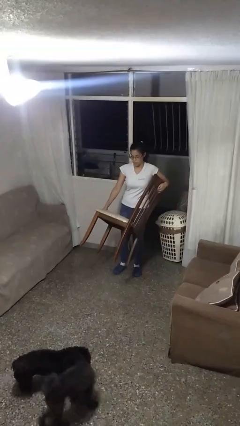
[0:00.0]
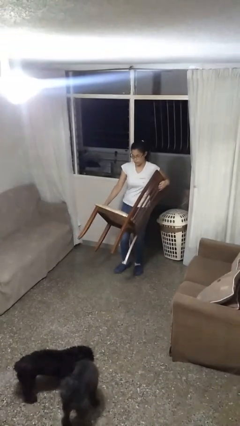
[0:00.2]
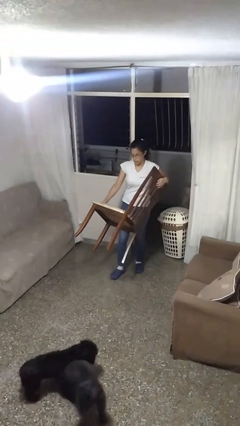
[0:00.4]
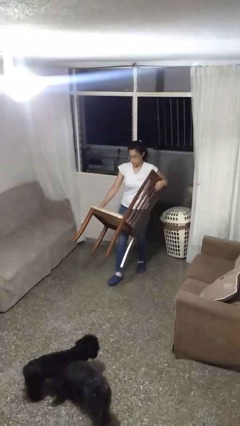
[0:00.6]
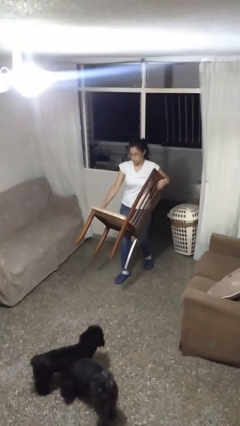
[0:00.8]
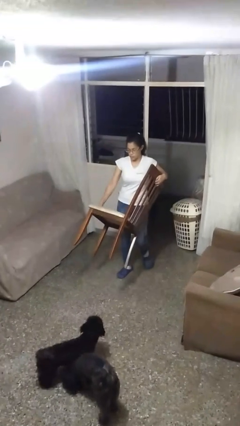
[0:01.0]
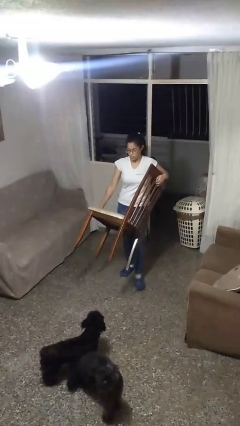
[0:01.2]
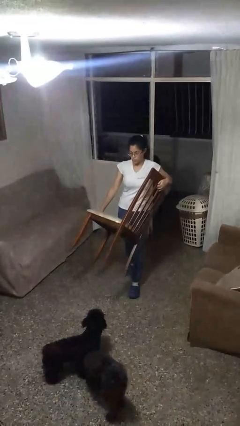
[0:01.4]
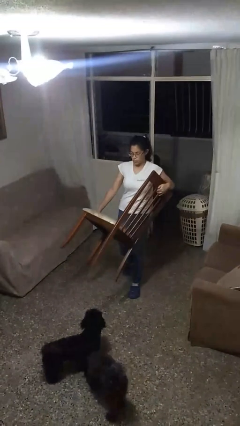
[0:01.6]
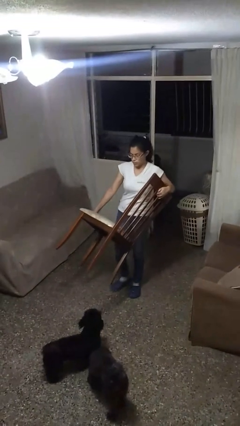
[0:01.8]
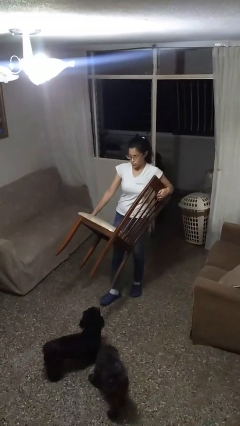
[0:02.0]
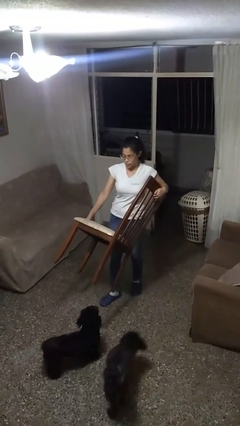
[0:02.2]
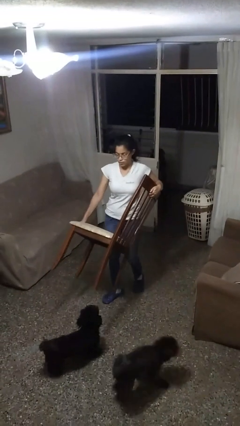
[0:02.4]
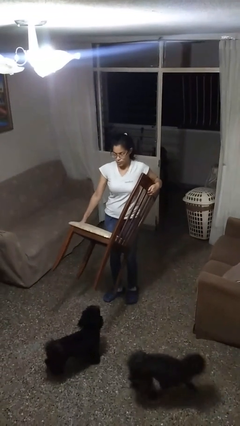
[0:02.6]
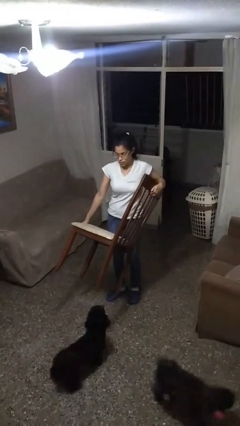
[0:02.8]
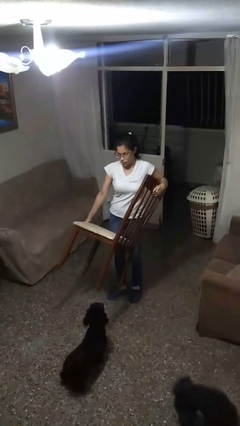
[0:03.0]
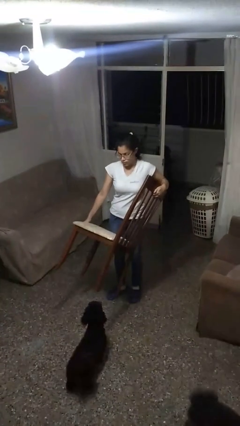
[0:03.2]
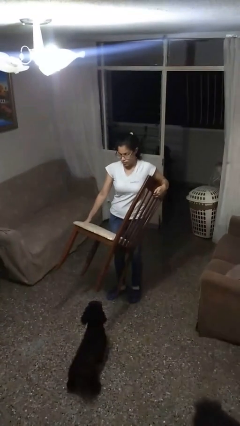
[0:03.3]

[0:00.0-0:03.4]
person carries furniture

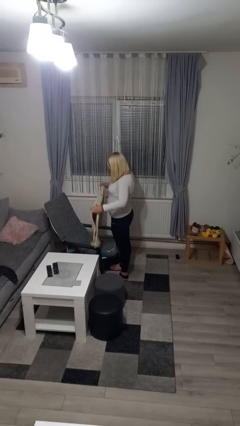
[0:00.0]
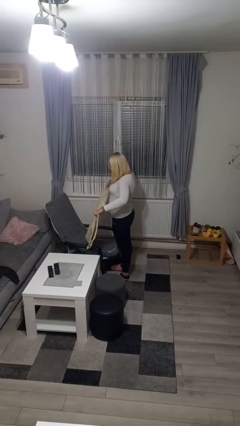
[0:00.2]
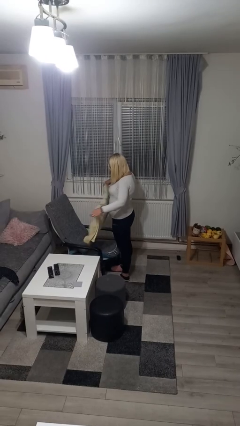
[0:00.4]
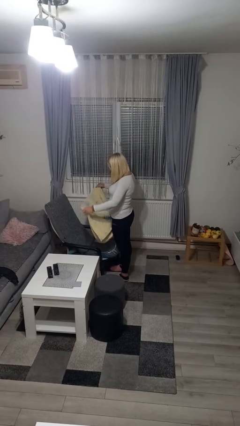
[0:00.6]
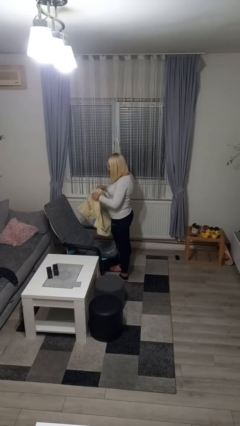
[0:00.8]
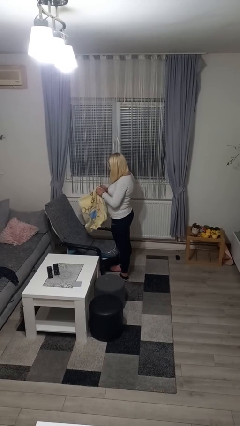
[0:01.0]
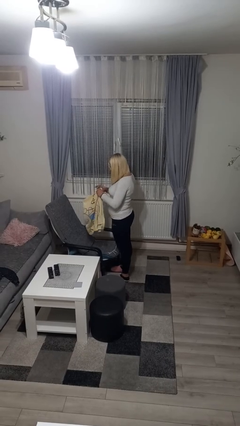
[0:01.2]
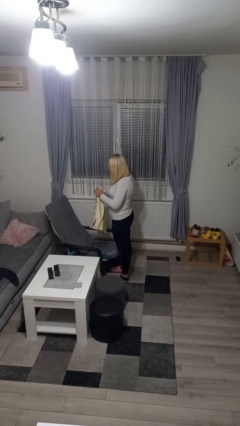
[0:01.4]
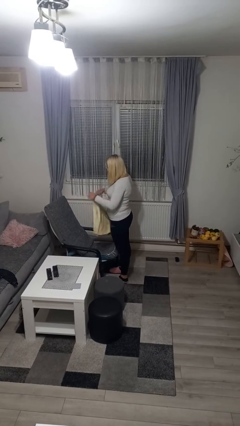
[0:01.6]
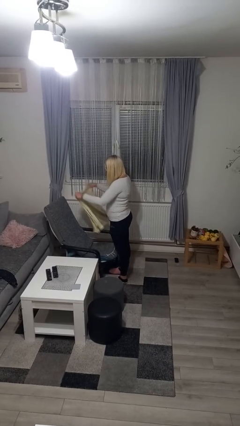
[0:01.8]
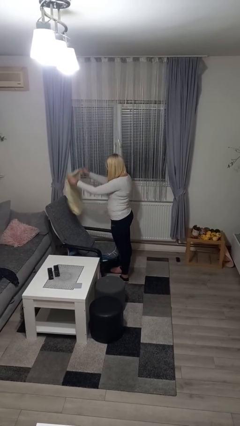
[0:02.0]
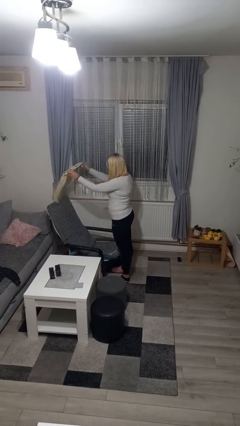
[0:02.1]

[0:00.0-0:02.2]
person folds blanket

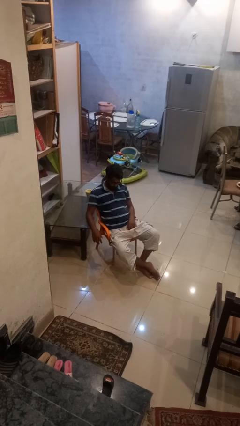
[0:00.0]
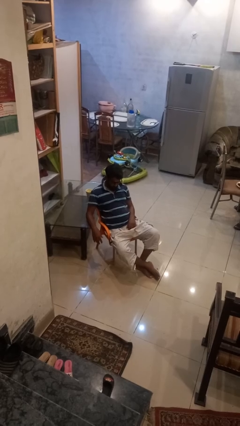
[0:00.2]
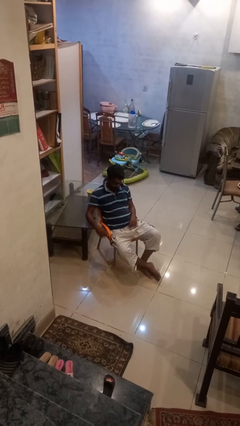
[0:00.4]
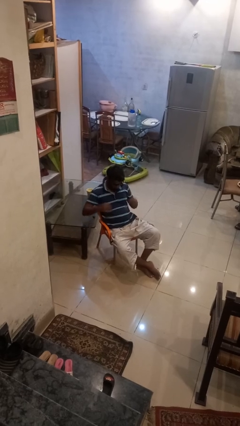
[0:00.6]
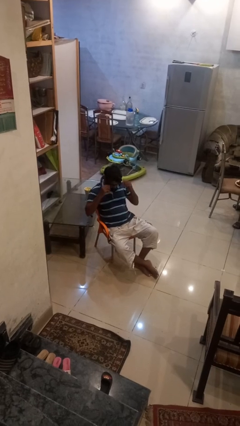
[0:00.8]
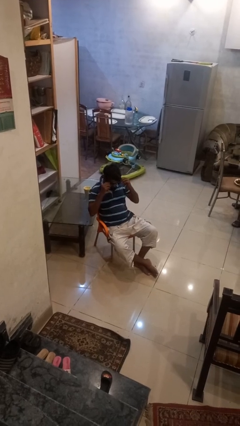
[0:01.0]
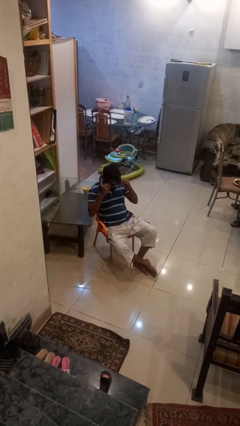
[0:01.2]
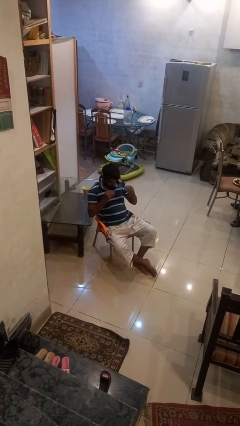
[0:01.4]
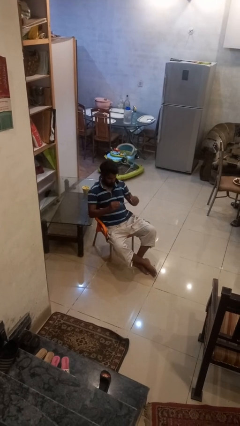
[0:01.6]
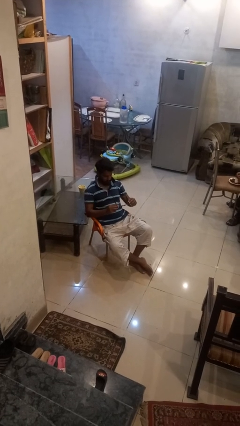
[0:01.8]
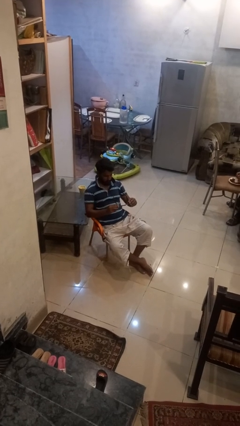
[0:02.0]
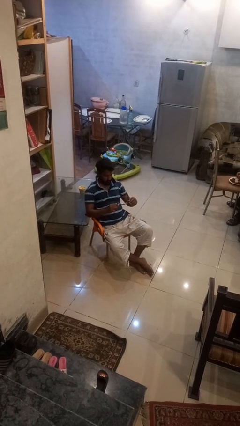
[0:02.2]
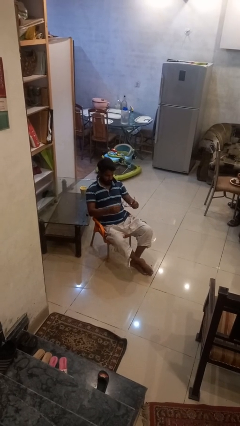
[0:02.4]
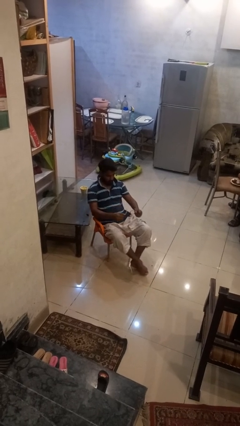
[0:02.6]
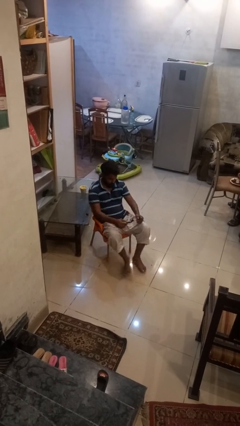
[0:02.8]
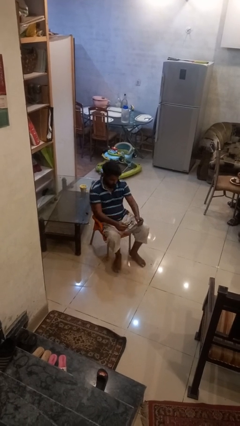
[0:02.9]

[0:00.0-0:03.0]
person takes off glasses

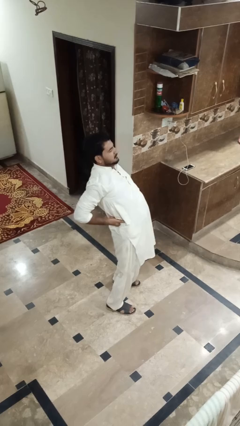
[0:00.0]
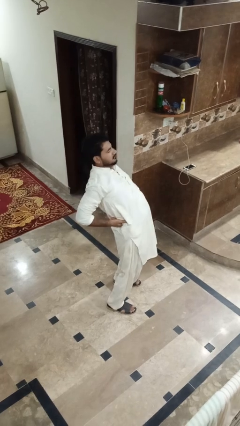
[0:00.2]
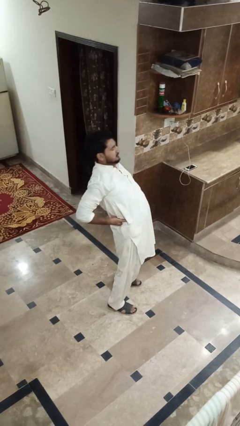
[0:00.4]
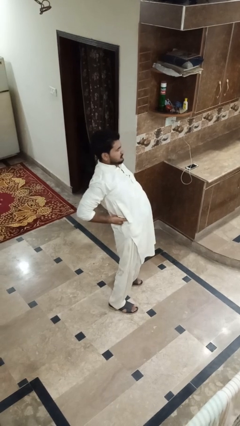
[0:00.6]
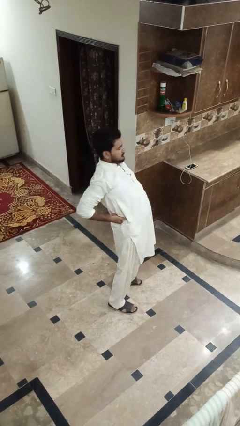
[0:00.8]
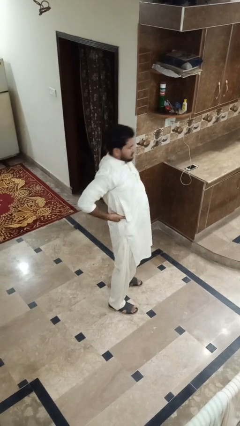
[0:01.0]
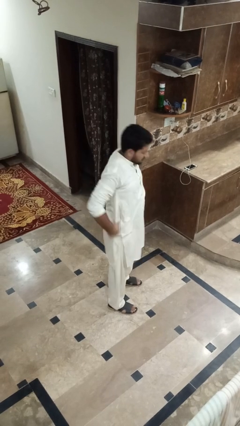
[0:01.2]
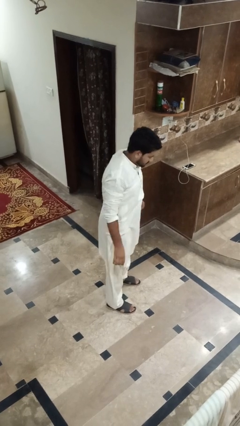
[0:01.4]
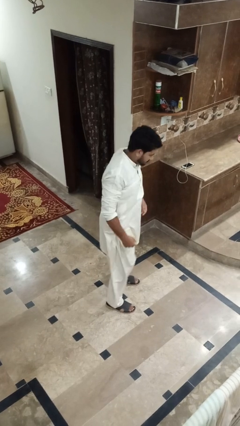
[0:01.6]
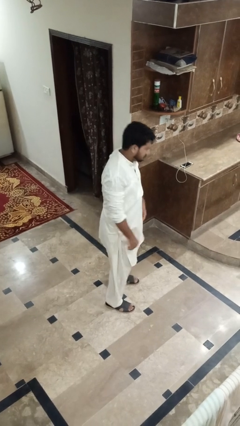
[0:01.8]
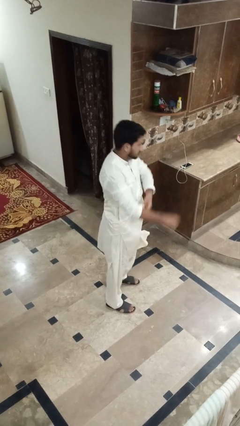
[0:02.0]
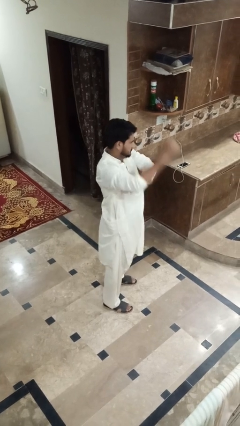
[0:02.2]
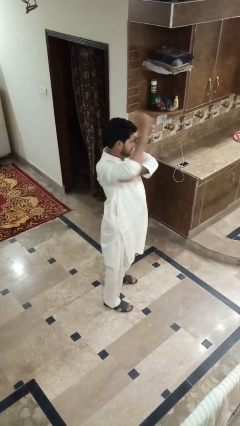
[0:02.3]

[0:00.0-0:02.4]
person stretches back

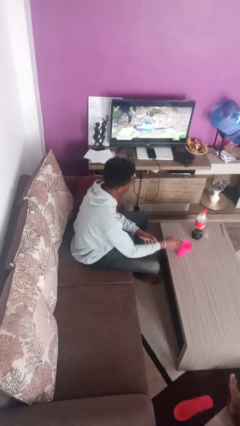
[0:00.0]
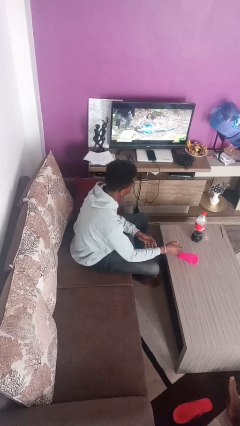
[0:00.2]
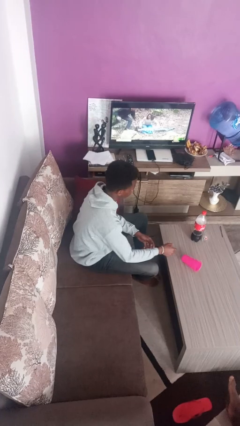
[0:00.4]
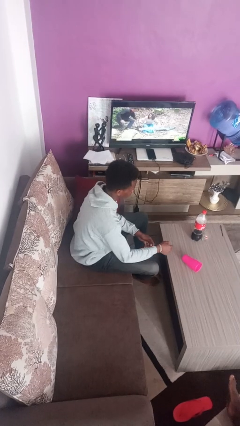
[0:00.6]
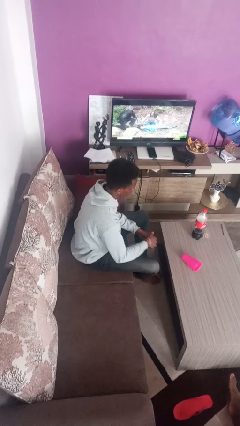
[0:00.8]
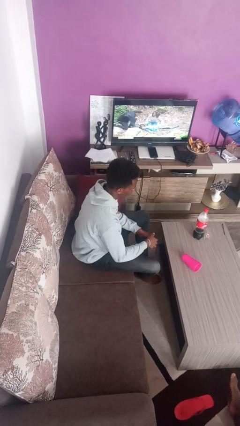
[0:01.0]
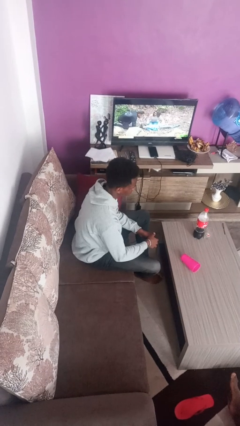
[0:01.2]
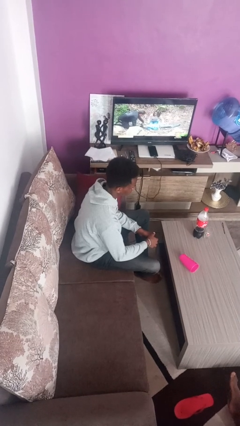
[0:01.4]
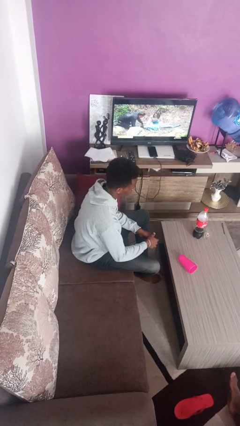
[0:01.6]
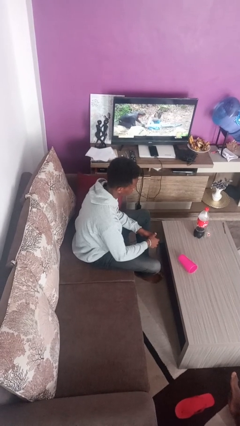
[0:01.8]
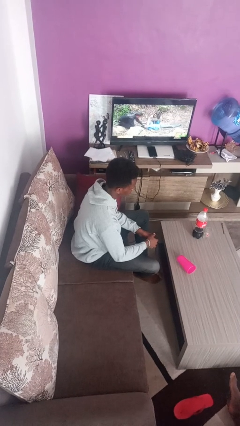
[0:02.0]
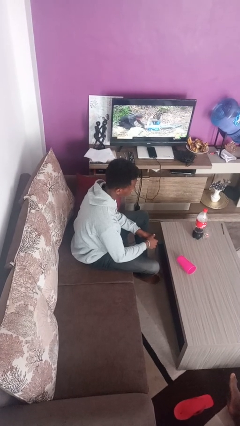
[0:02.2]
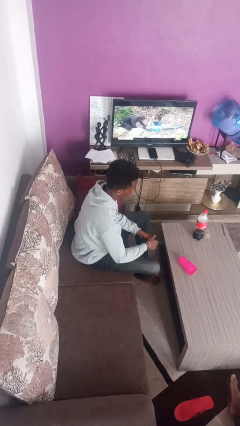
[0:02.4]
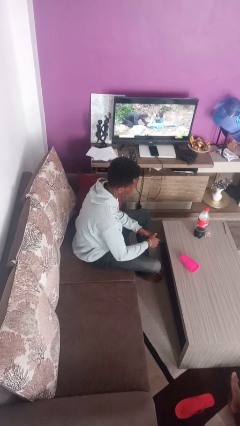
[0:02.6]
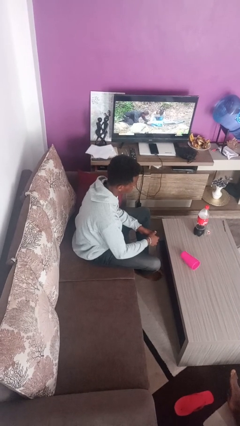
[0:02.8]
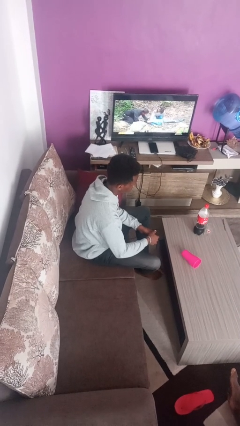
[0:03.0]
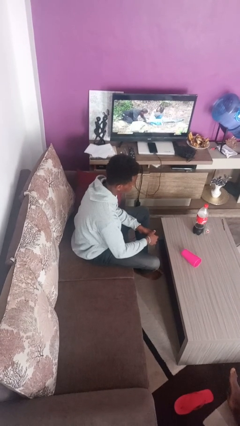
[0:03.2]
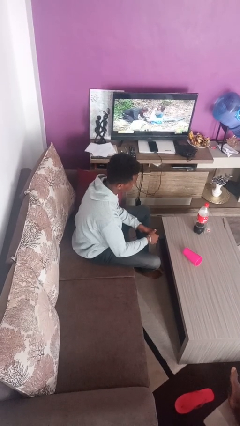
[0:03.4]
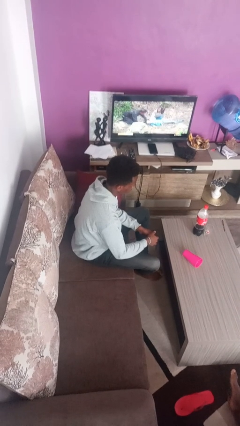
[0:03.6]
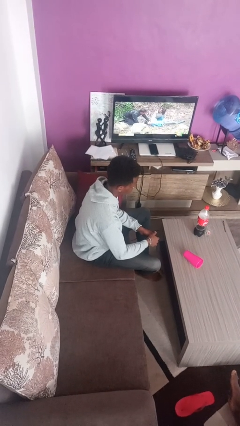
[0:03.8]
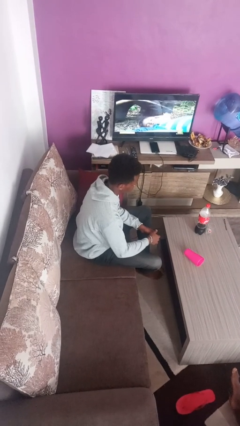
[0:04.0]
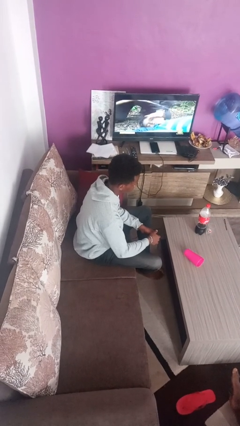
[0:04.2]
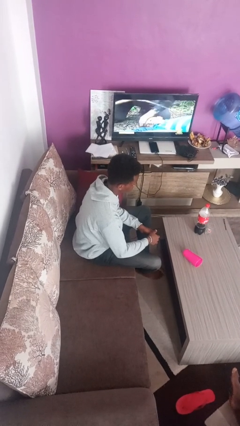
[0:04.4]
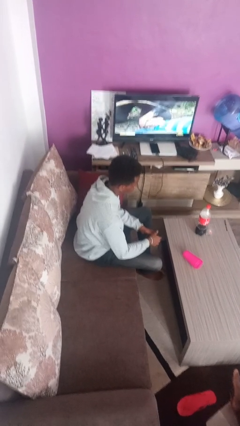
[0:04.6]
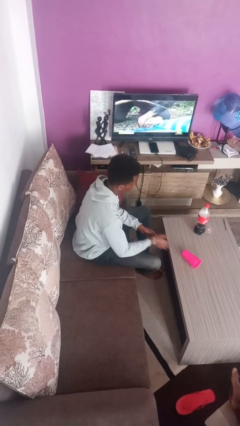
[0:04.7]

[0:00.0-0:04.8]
person knocks over glass

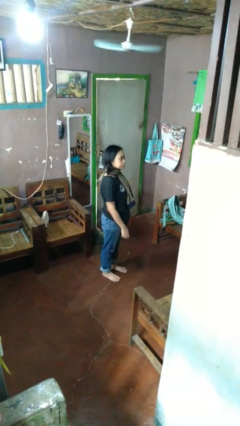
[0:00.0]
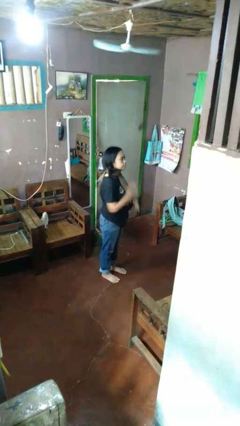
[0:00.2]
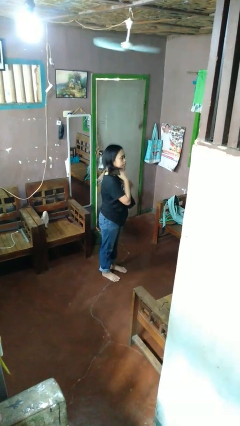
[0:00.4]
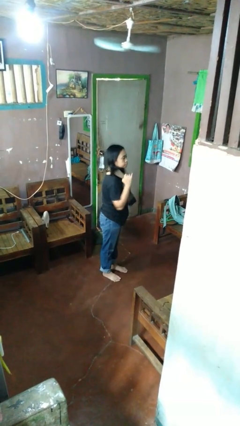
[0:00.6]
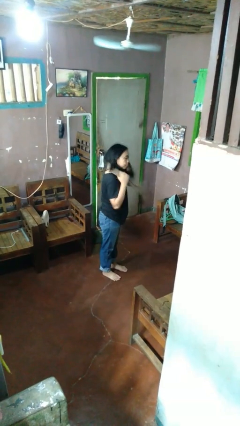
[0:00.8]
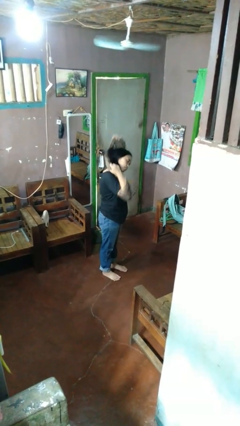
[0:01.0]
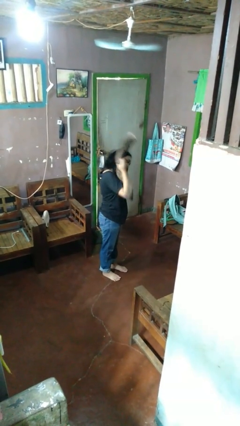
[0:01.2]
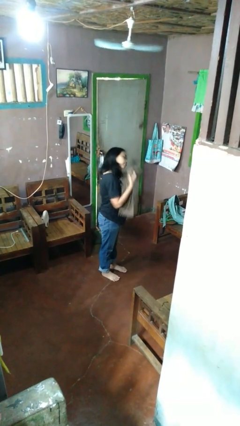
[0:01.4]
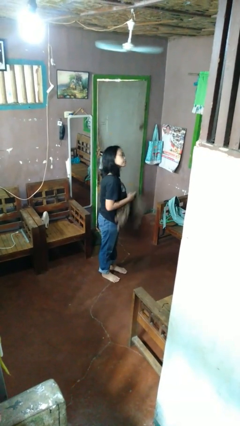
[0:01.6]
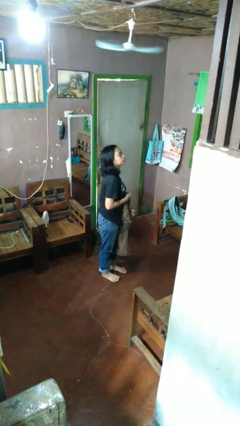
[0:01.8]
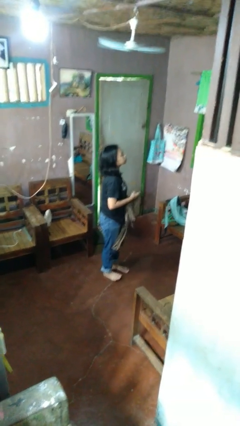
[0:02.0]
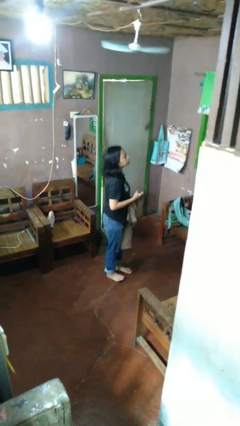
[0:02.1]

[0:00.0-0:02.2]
person takes off scarf
